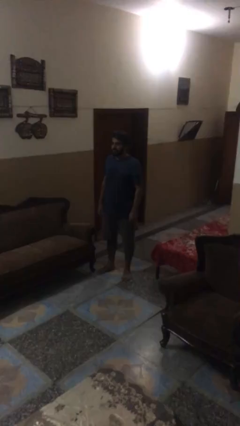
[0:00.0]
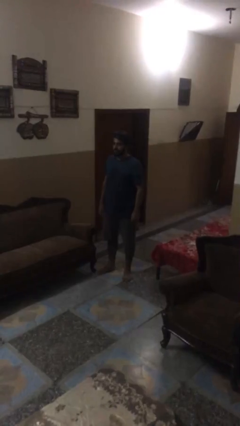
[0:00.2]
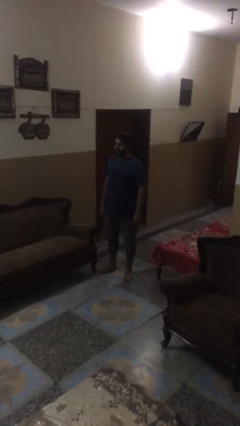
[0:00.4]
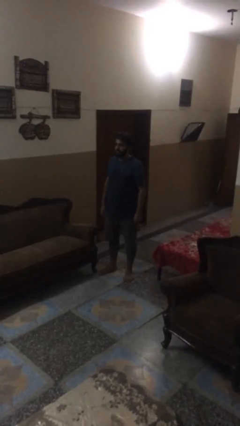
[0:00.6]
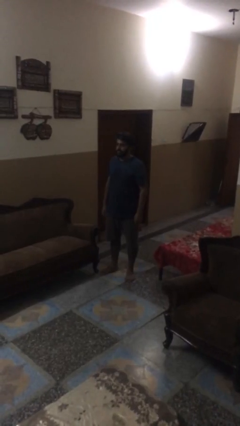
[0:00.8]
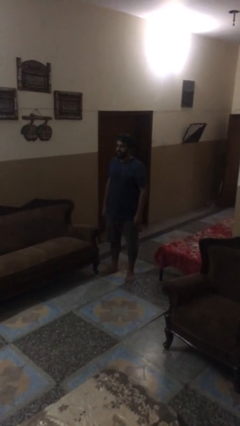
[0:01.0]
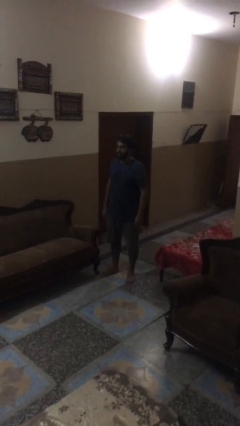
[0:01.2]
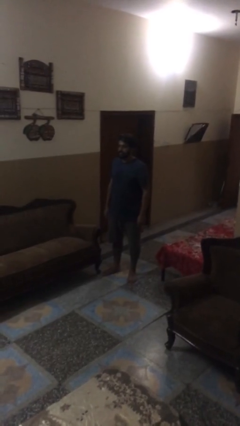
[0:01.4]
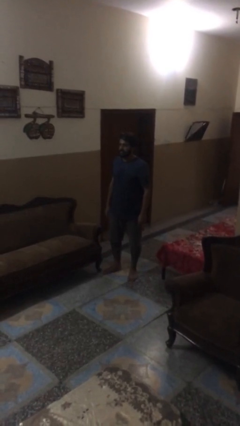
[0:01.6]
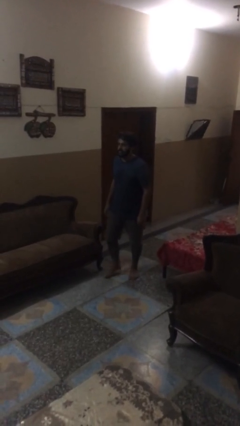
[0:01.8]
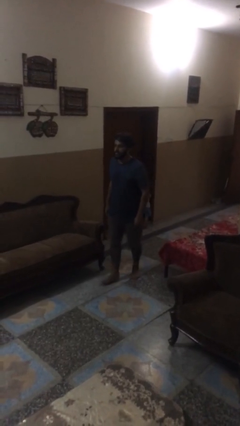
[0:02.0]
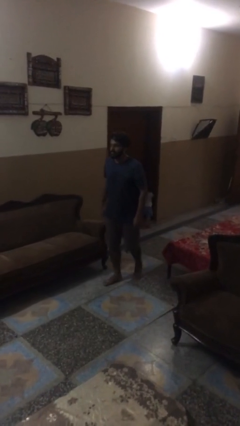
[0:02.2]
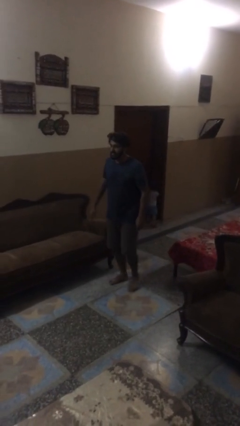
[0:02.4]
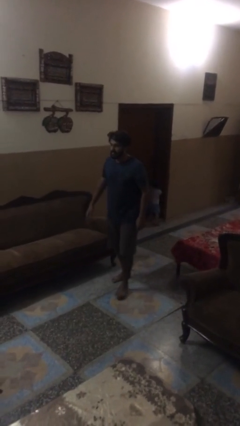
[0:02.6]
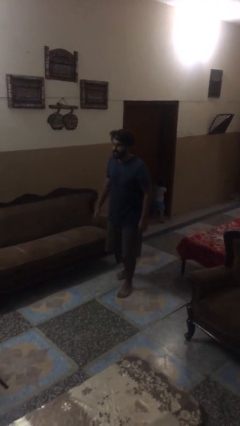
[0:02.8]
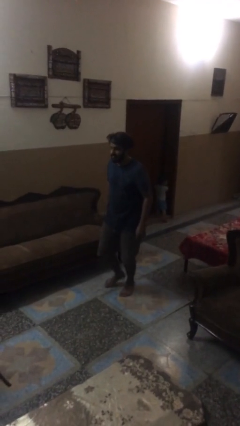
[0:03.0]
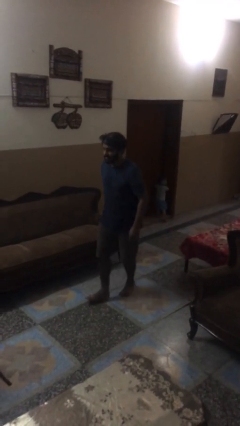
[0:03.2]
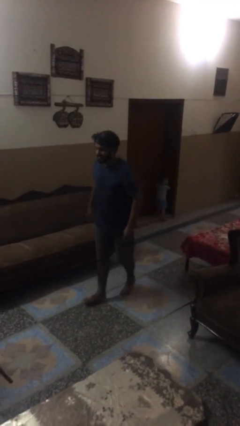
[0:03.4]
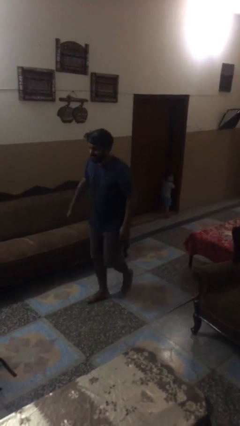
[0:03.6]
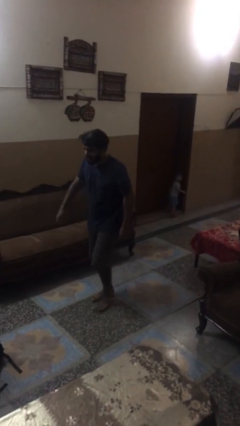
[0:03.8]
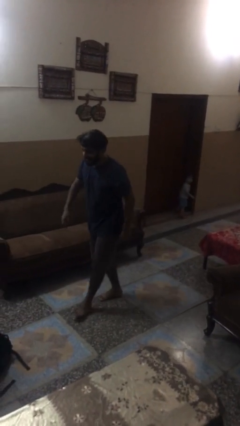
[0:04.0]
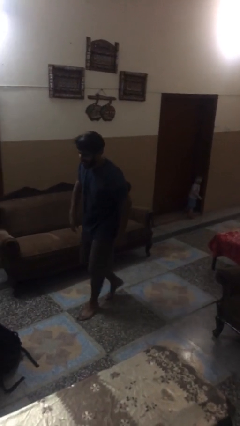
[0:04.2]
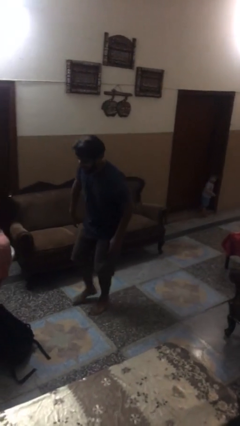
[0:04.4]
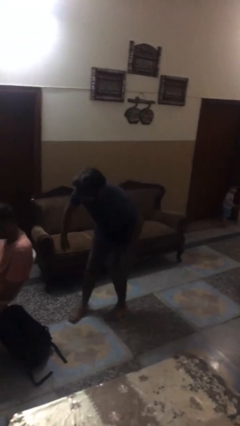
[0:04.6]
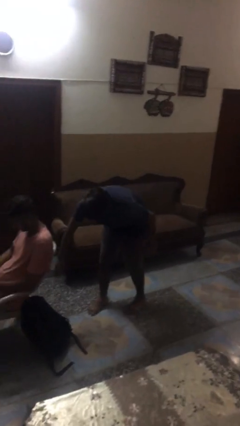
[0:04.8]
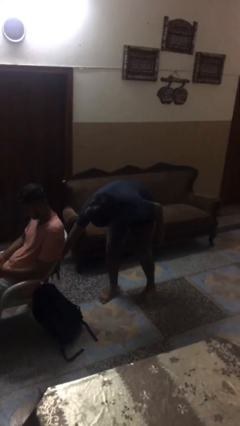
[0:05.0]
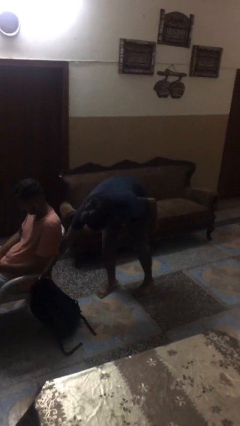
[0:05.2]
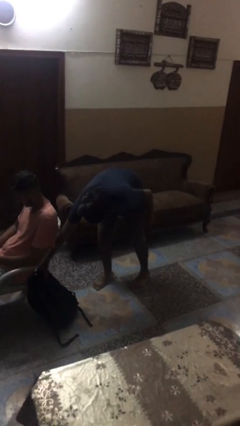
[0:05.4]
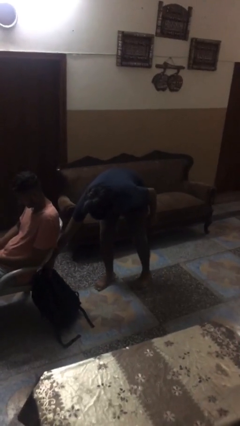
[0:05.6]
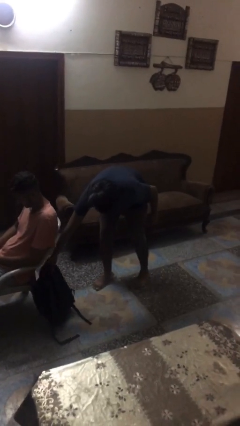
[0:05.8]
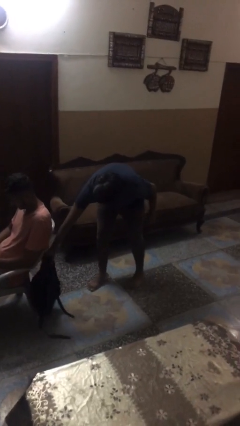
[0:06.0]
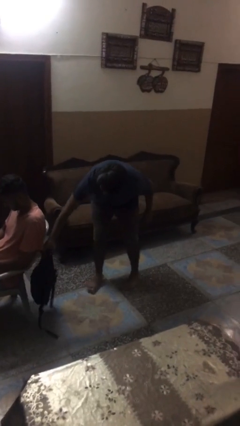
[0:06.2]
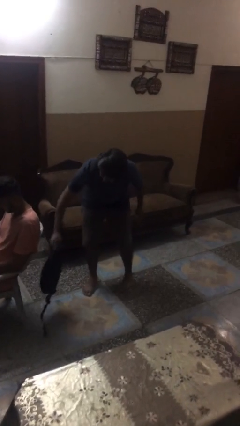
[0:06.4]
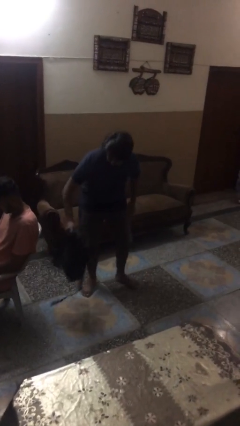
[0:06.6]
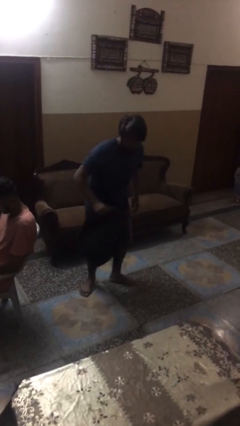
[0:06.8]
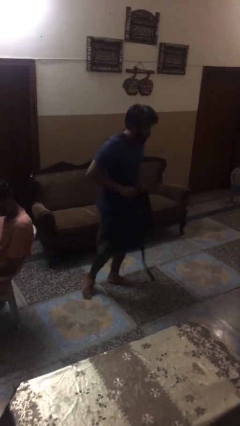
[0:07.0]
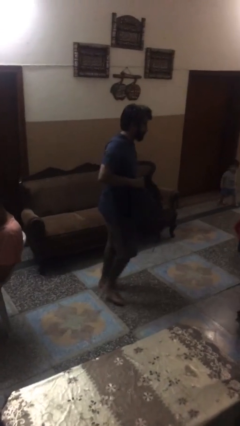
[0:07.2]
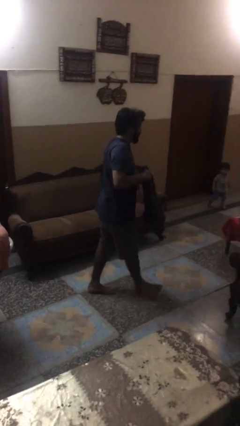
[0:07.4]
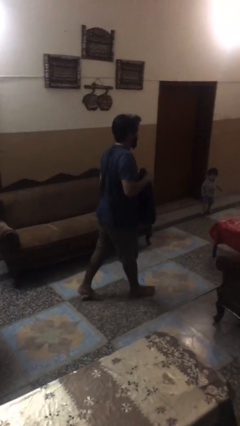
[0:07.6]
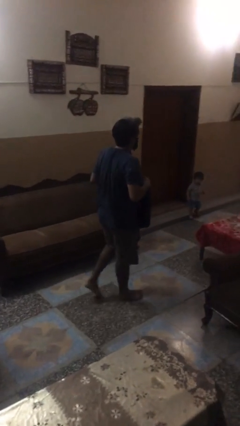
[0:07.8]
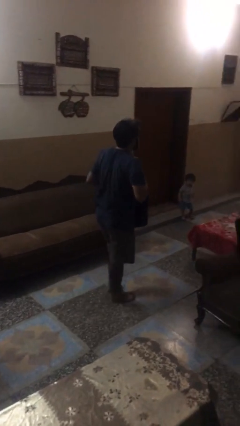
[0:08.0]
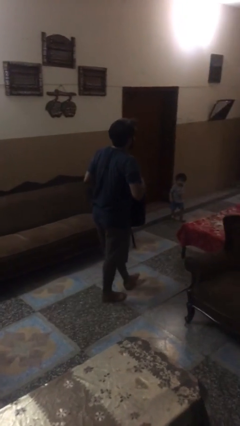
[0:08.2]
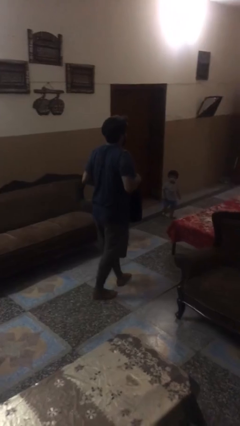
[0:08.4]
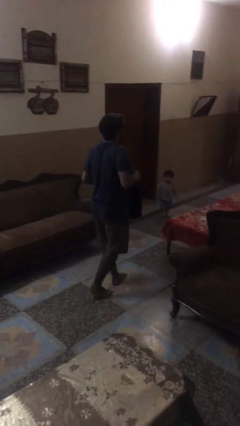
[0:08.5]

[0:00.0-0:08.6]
person steals object from person

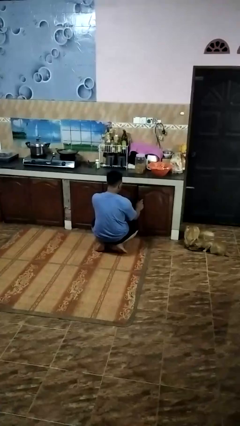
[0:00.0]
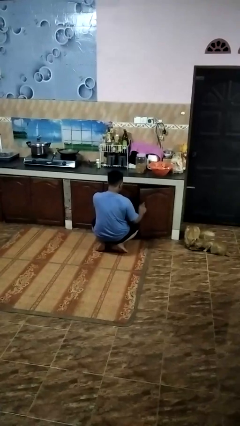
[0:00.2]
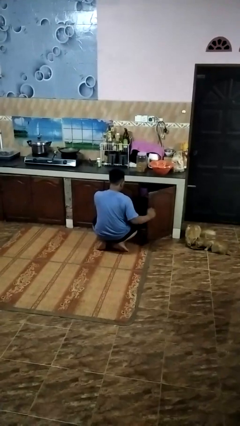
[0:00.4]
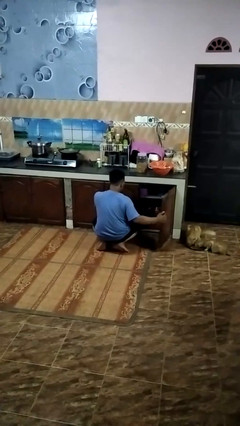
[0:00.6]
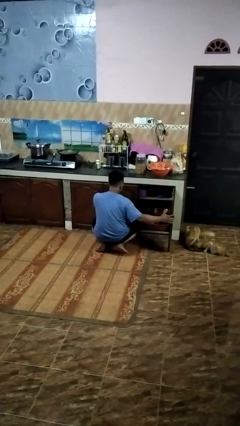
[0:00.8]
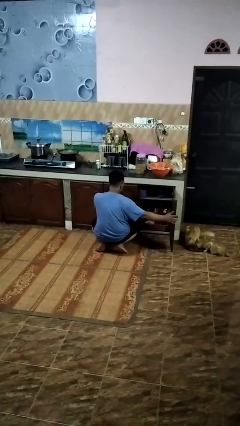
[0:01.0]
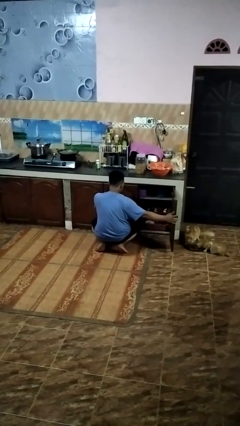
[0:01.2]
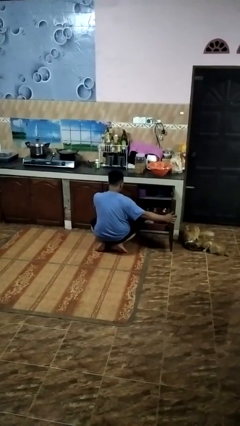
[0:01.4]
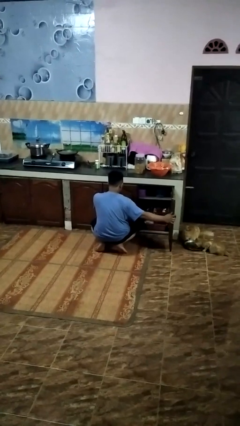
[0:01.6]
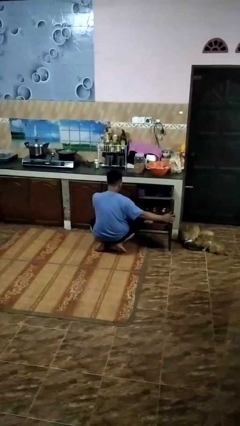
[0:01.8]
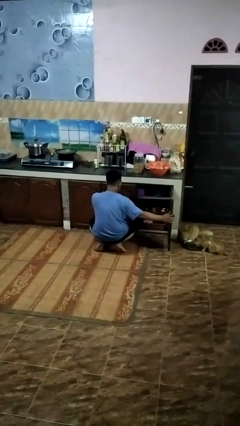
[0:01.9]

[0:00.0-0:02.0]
person opens kitchen drawer

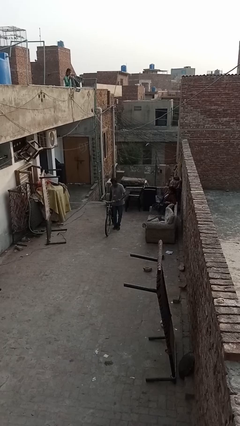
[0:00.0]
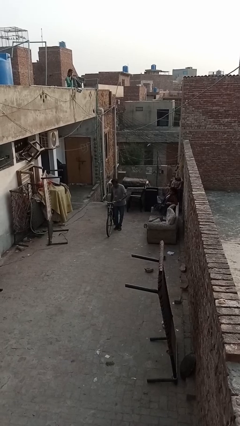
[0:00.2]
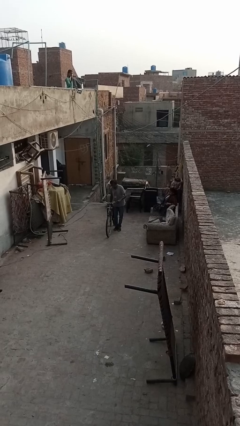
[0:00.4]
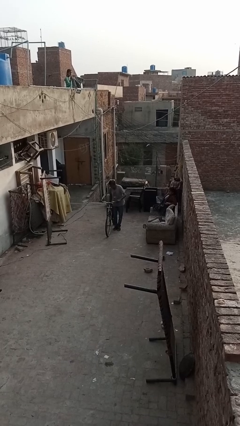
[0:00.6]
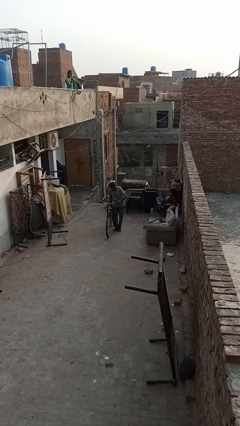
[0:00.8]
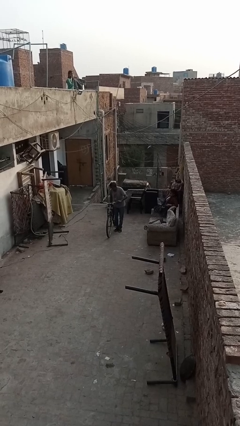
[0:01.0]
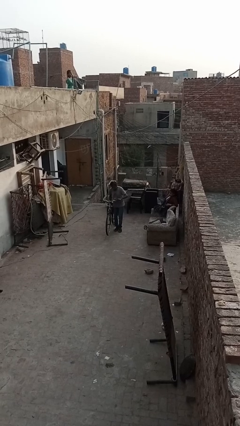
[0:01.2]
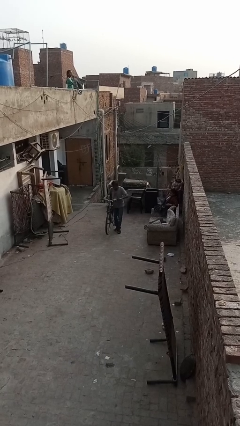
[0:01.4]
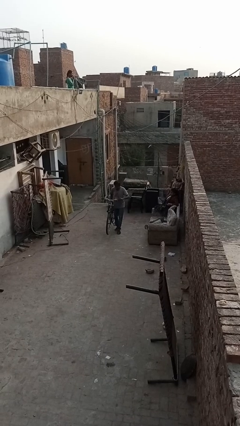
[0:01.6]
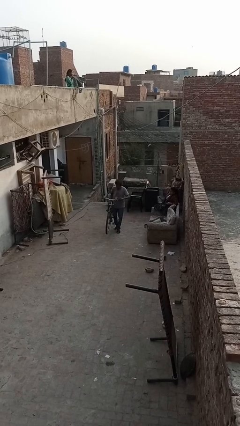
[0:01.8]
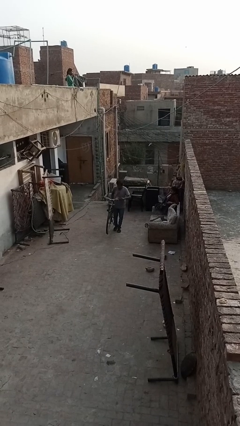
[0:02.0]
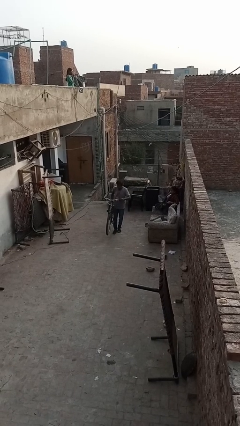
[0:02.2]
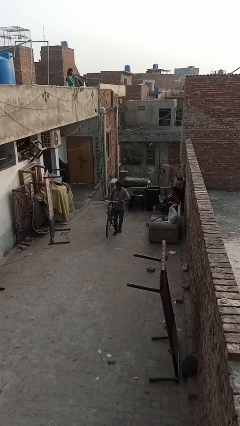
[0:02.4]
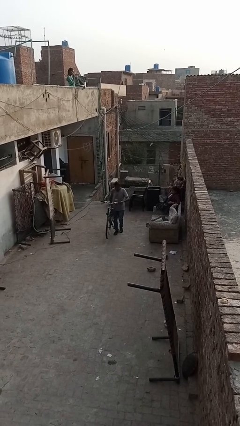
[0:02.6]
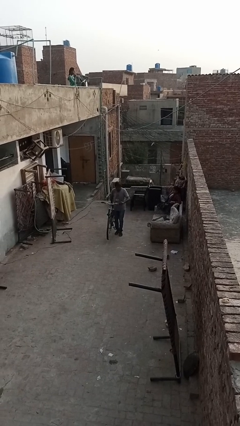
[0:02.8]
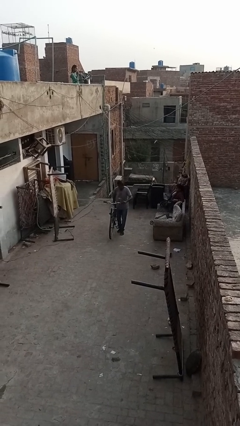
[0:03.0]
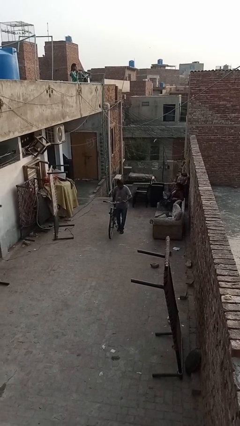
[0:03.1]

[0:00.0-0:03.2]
person carries bicycle

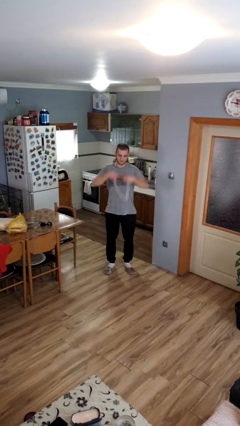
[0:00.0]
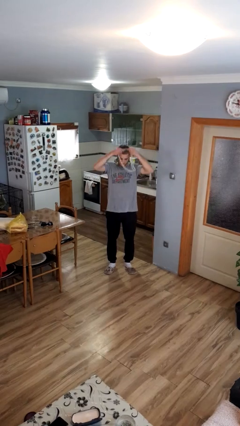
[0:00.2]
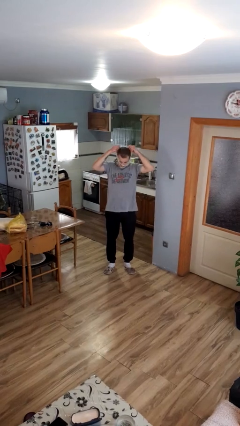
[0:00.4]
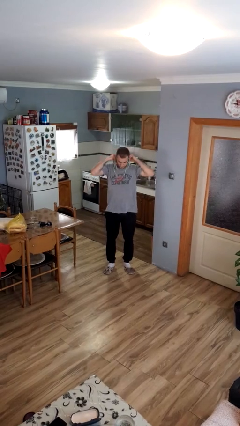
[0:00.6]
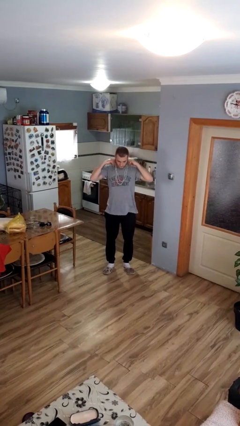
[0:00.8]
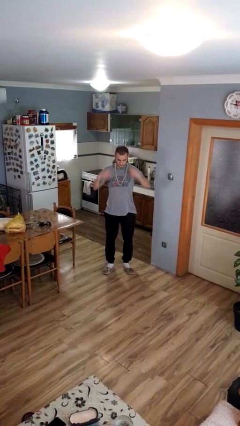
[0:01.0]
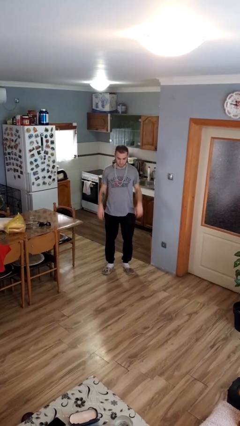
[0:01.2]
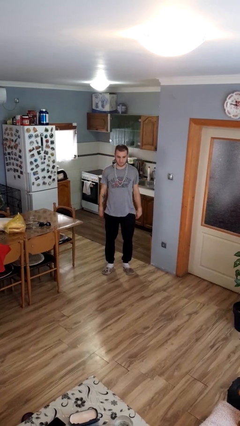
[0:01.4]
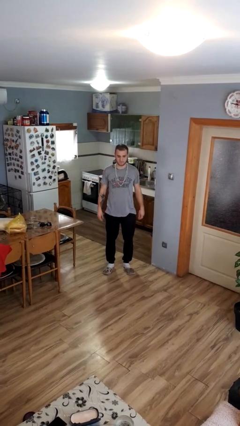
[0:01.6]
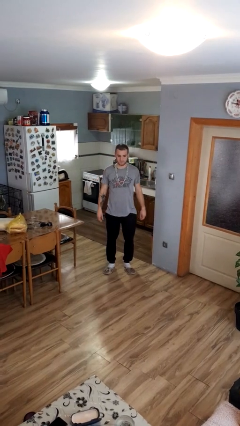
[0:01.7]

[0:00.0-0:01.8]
person puts on necklace

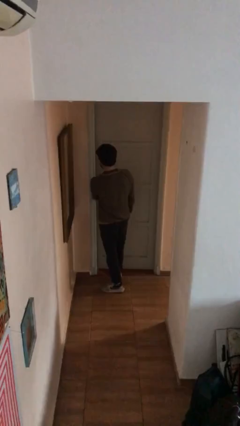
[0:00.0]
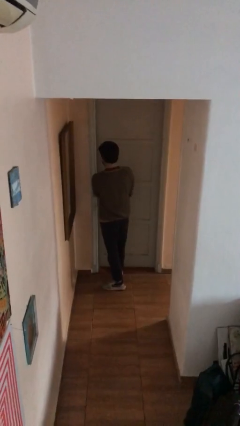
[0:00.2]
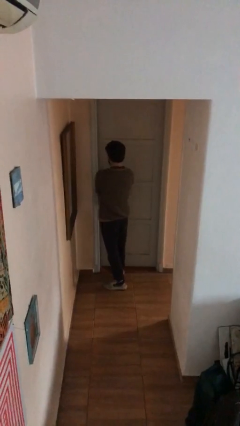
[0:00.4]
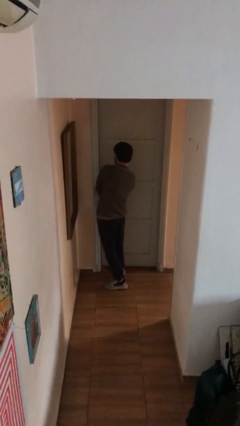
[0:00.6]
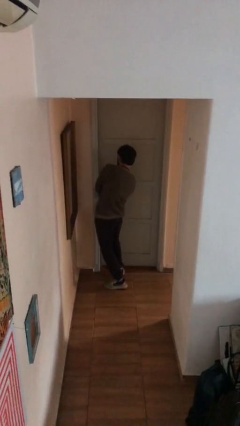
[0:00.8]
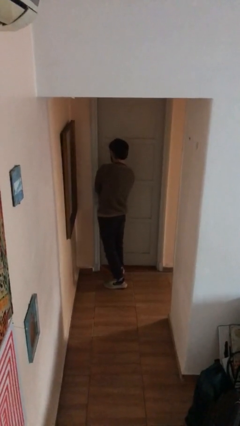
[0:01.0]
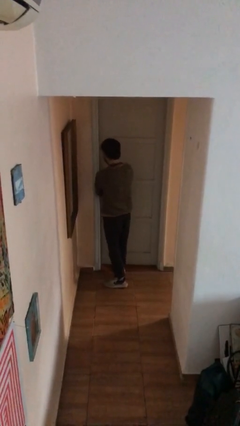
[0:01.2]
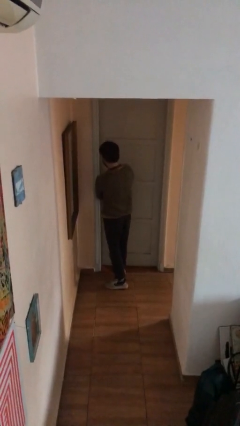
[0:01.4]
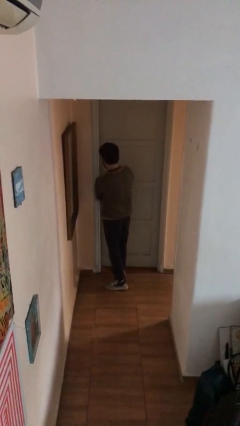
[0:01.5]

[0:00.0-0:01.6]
person unlocks door with keys

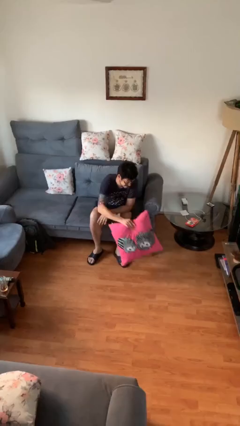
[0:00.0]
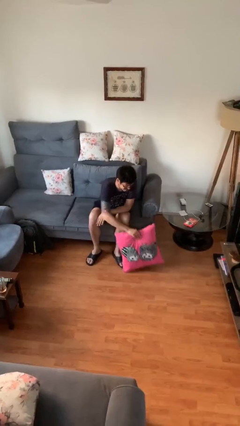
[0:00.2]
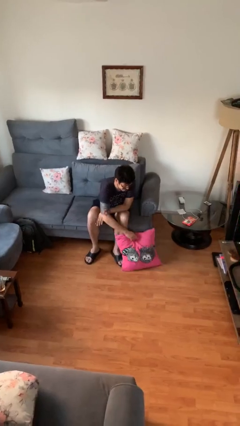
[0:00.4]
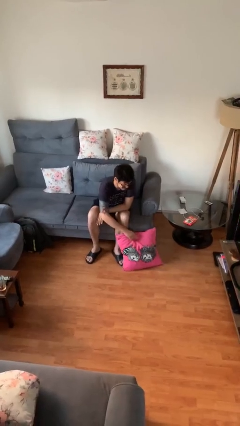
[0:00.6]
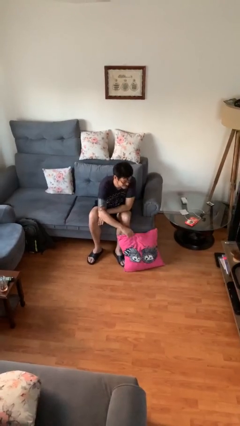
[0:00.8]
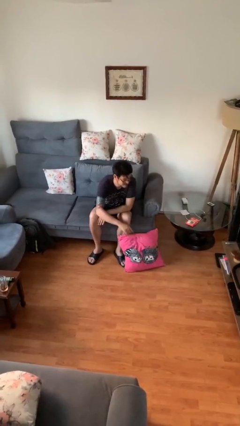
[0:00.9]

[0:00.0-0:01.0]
person puts down object on floor
